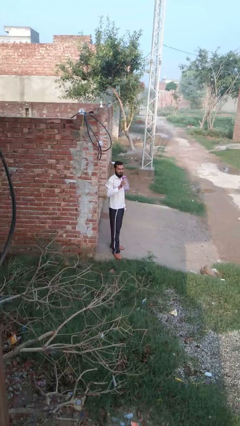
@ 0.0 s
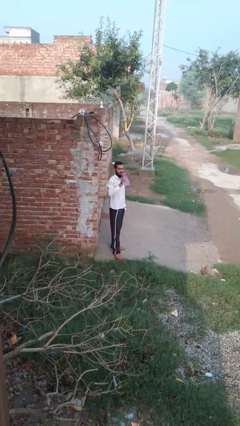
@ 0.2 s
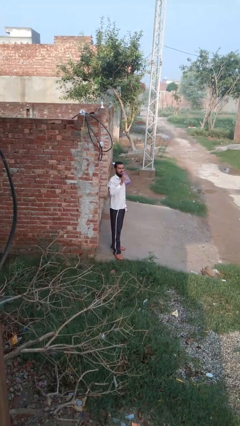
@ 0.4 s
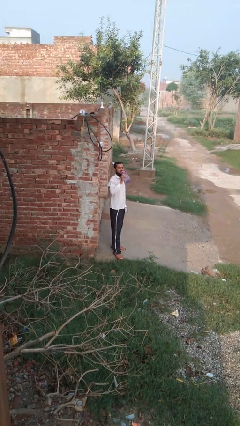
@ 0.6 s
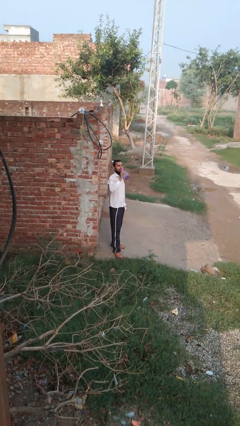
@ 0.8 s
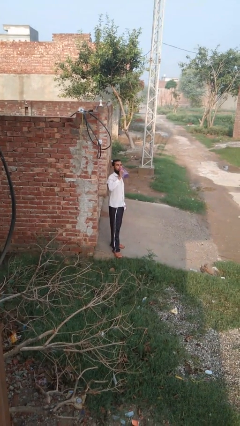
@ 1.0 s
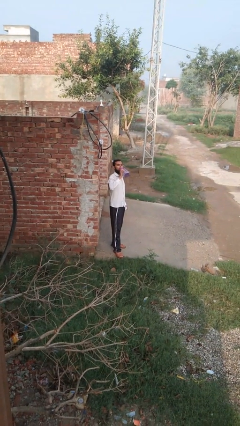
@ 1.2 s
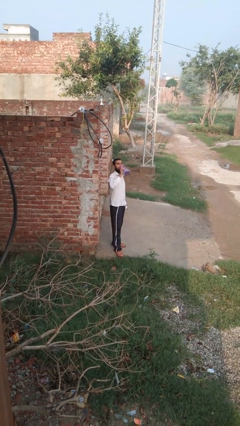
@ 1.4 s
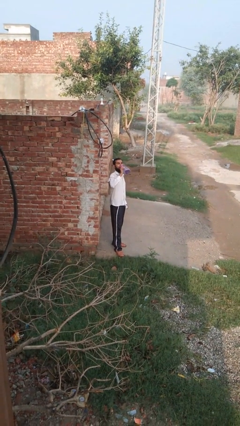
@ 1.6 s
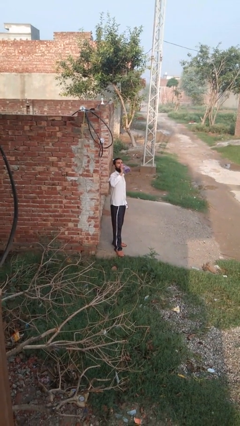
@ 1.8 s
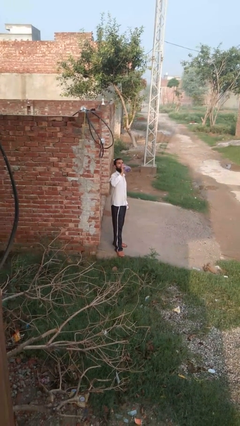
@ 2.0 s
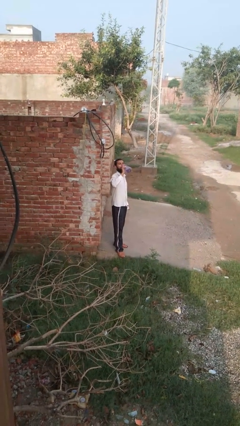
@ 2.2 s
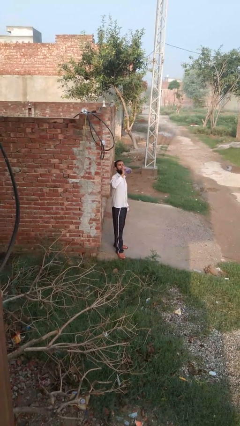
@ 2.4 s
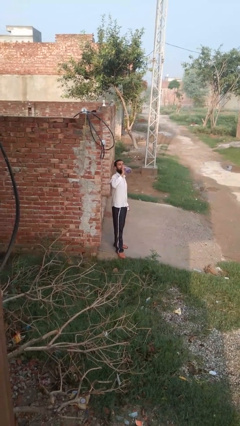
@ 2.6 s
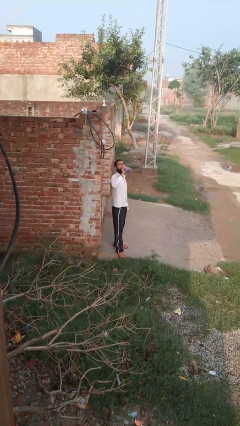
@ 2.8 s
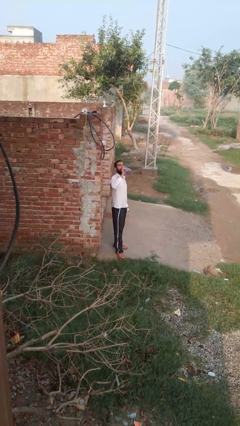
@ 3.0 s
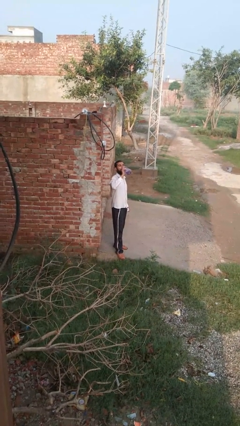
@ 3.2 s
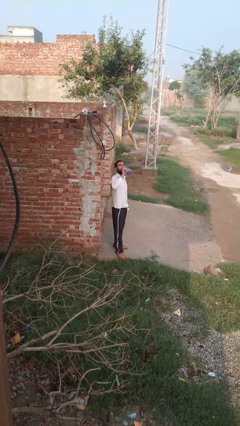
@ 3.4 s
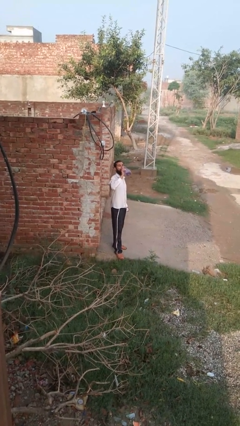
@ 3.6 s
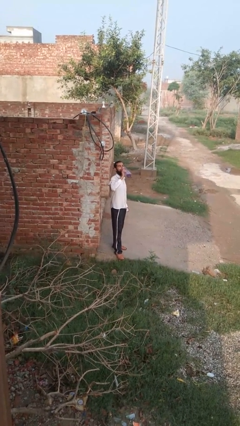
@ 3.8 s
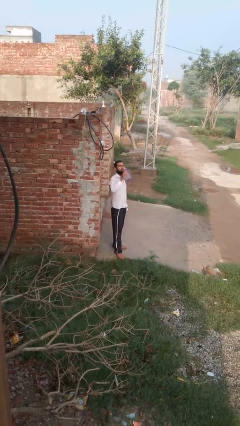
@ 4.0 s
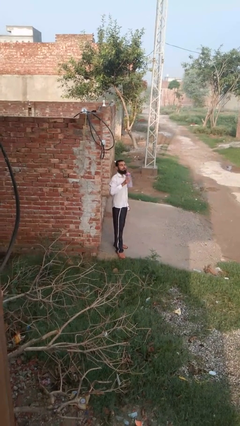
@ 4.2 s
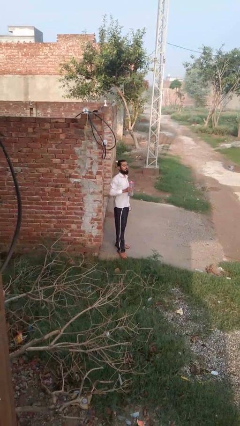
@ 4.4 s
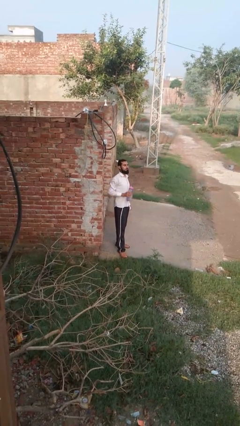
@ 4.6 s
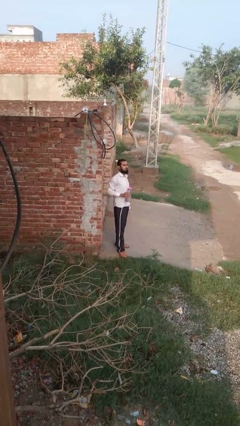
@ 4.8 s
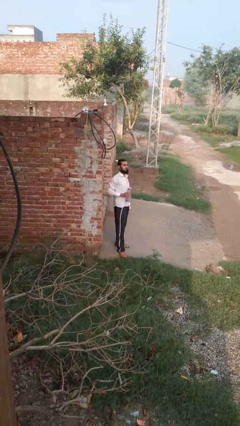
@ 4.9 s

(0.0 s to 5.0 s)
person drinks from bottle

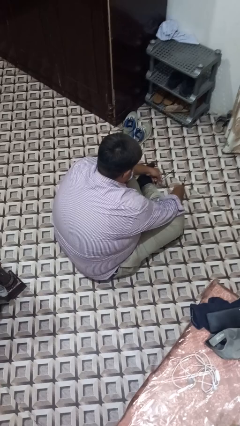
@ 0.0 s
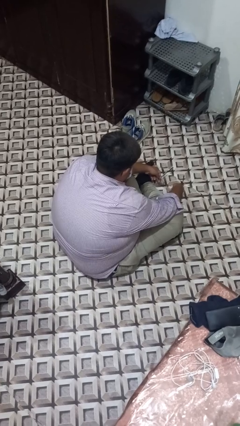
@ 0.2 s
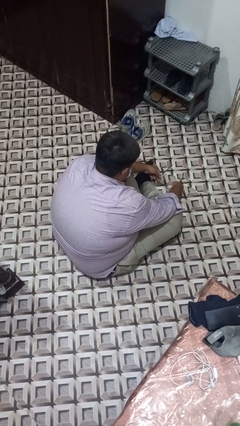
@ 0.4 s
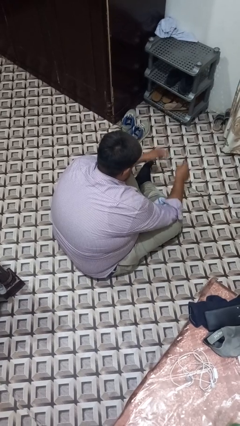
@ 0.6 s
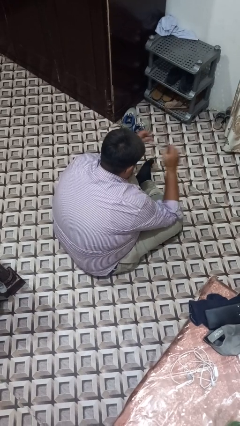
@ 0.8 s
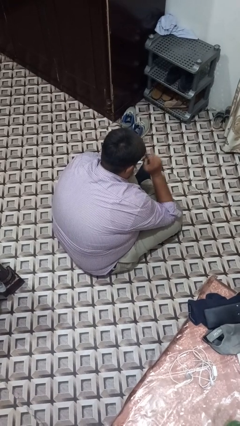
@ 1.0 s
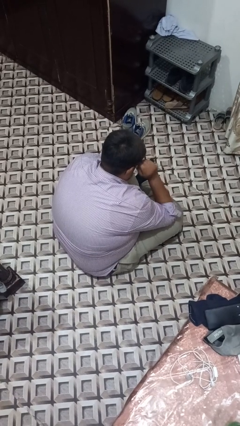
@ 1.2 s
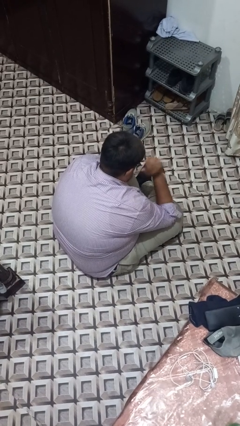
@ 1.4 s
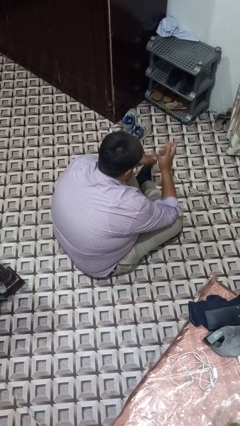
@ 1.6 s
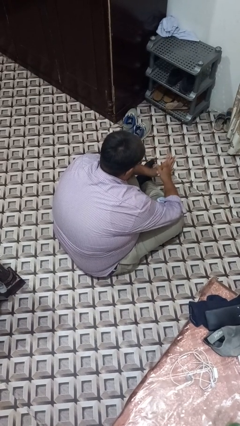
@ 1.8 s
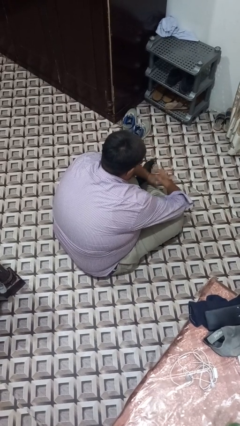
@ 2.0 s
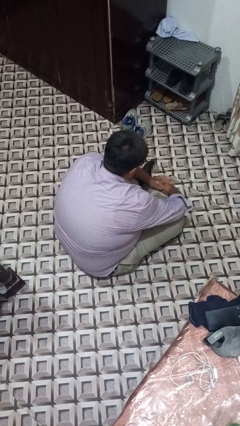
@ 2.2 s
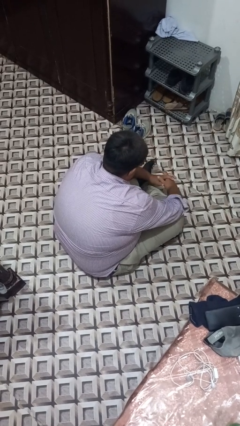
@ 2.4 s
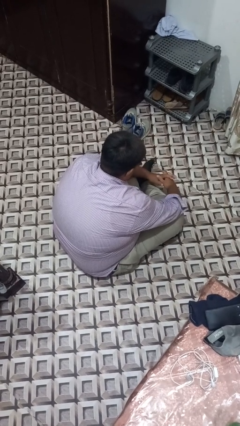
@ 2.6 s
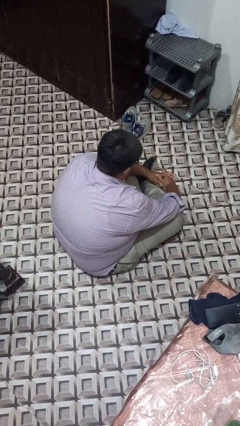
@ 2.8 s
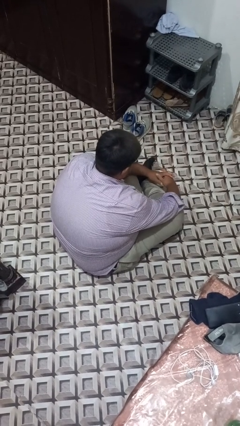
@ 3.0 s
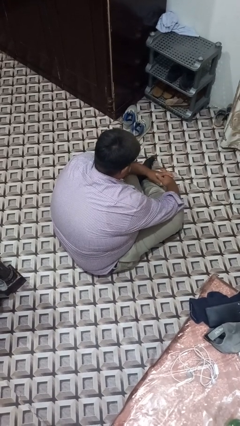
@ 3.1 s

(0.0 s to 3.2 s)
person puts on glasses

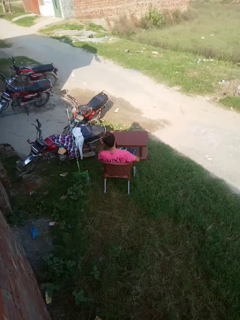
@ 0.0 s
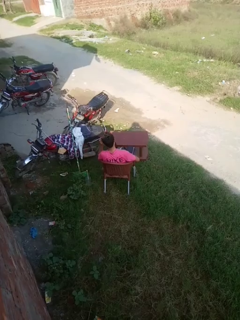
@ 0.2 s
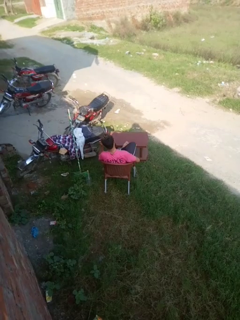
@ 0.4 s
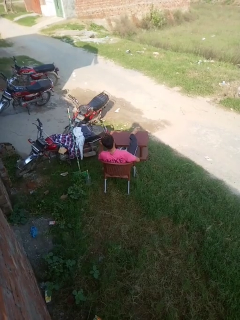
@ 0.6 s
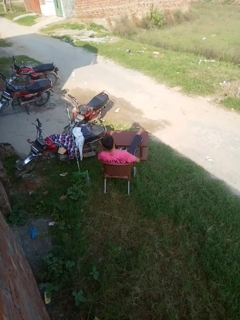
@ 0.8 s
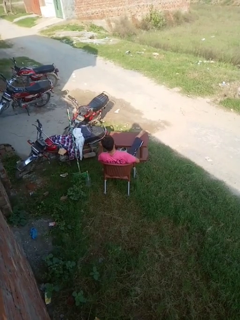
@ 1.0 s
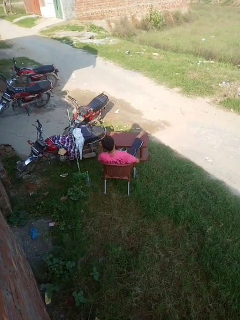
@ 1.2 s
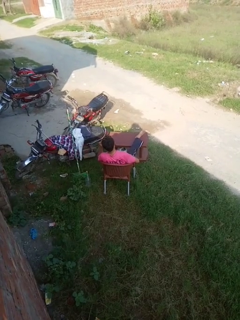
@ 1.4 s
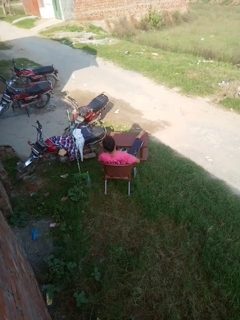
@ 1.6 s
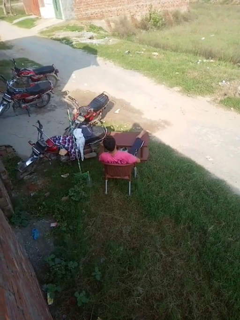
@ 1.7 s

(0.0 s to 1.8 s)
person puts feet up

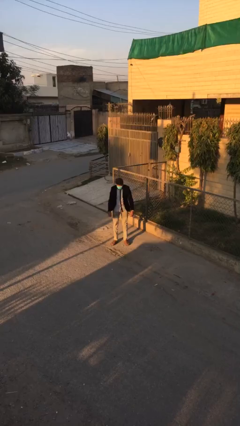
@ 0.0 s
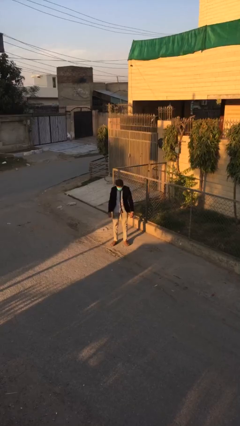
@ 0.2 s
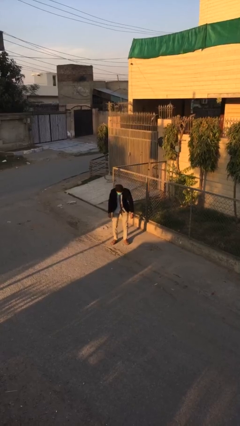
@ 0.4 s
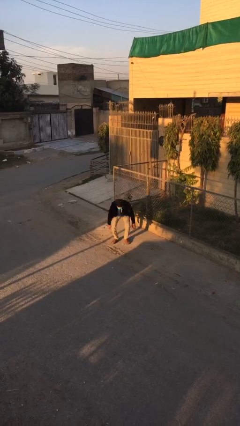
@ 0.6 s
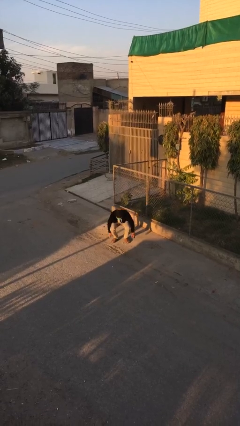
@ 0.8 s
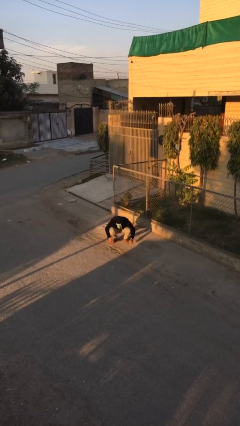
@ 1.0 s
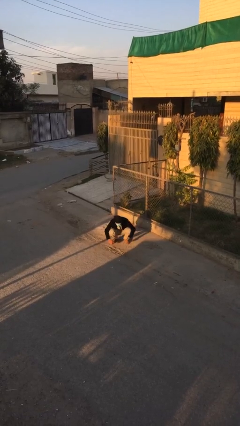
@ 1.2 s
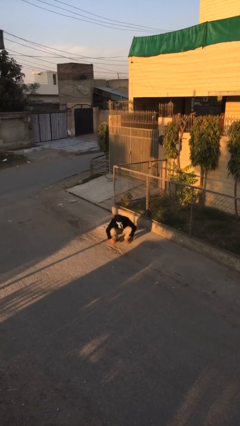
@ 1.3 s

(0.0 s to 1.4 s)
person sits down

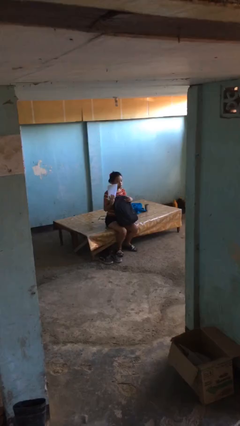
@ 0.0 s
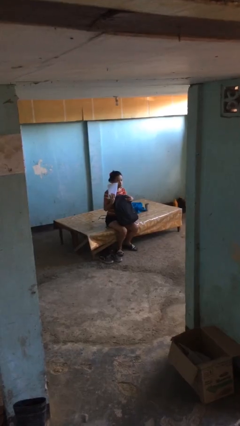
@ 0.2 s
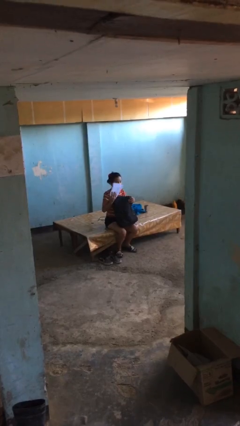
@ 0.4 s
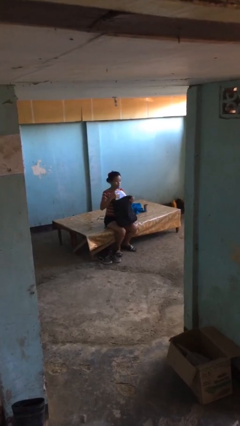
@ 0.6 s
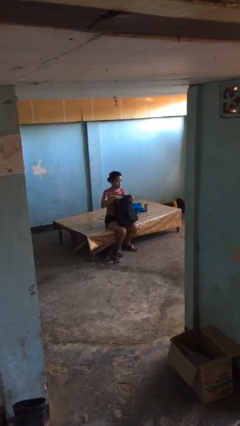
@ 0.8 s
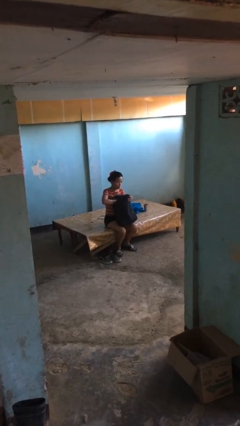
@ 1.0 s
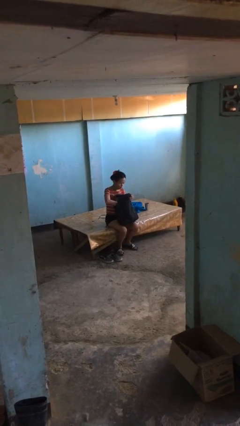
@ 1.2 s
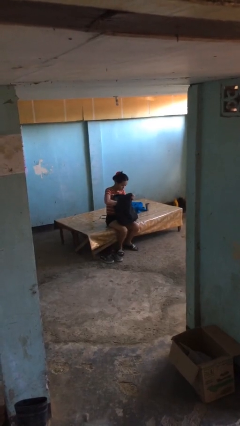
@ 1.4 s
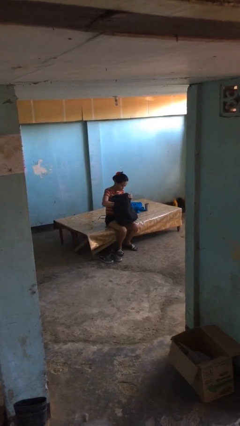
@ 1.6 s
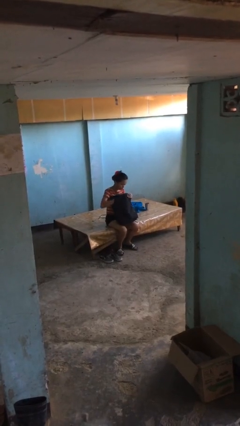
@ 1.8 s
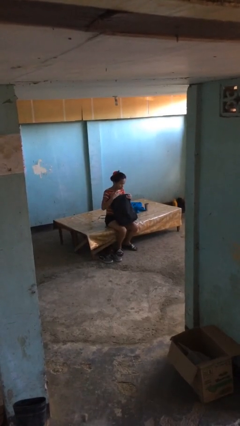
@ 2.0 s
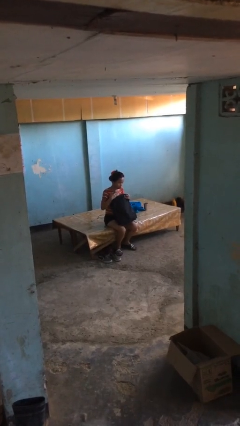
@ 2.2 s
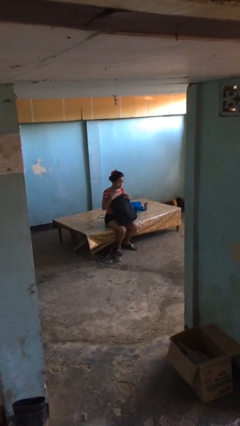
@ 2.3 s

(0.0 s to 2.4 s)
person puts object into backpack

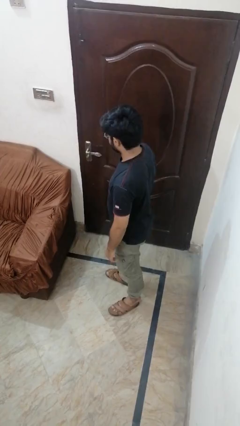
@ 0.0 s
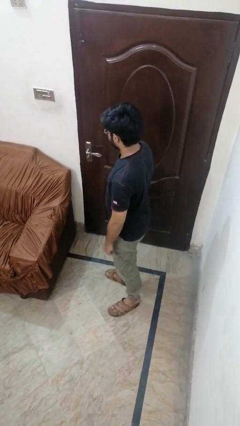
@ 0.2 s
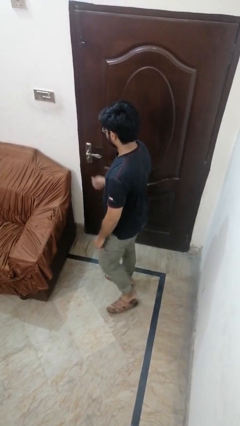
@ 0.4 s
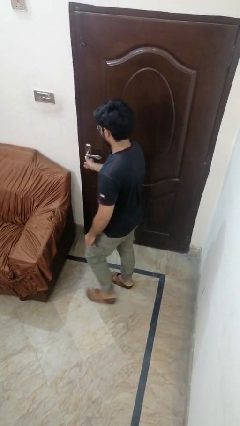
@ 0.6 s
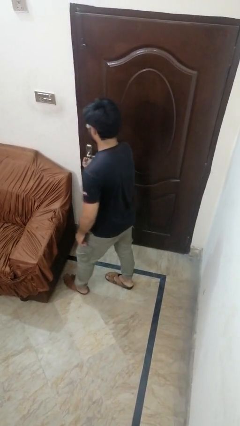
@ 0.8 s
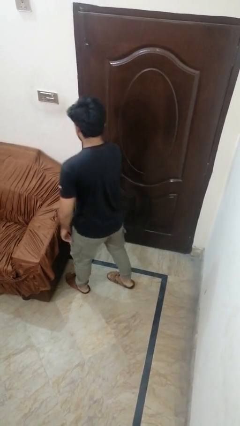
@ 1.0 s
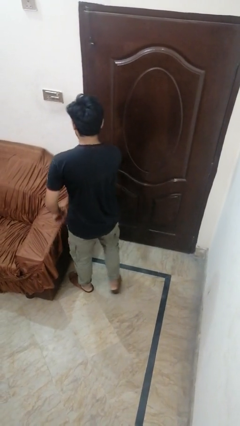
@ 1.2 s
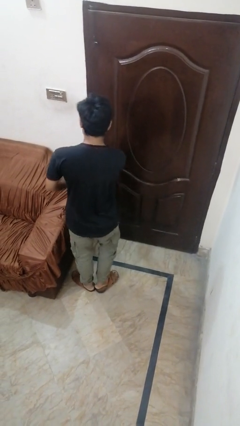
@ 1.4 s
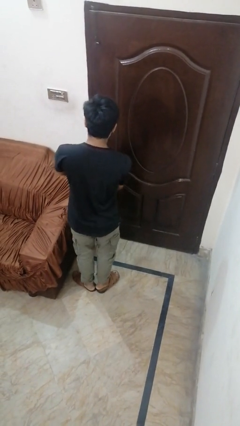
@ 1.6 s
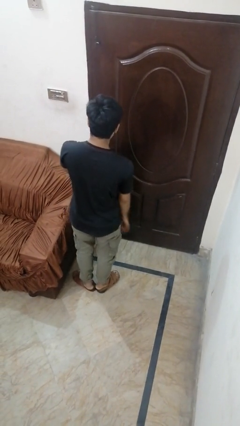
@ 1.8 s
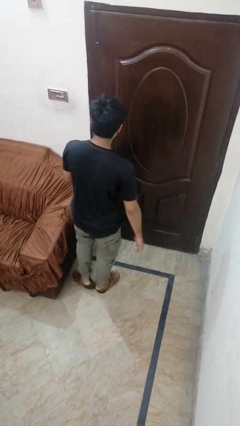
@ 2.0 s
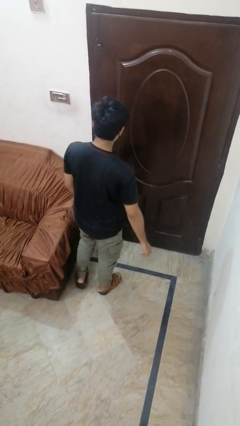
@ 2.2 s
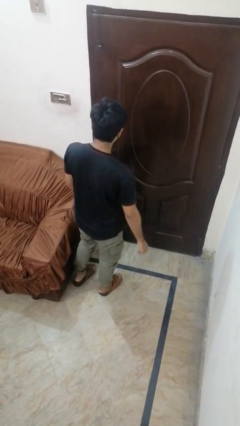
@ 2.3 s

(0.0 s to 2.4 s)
person unlocks door with keys

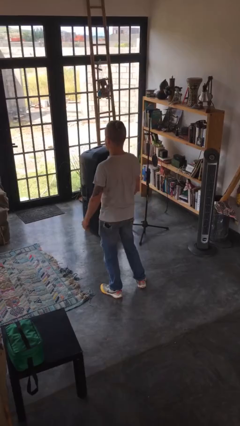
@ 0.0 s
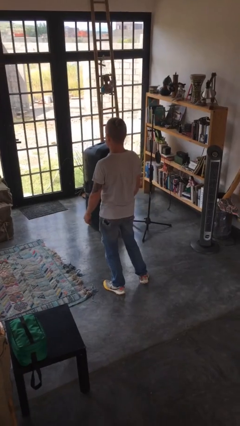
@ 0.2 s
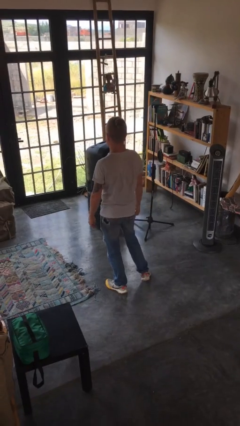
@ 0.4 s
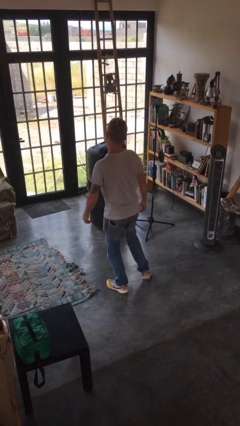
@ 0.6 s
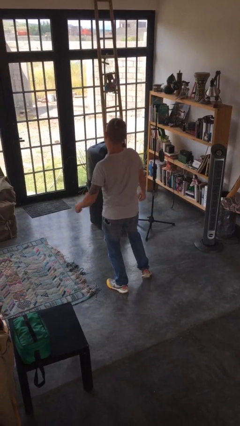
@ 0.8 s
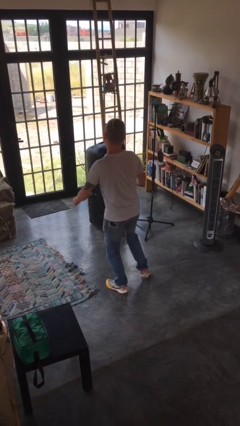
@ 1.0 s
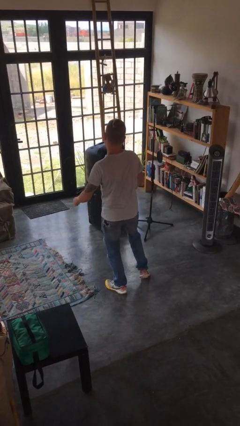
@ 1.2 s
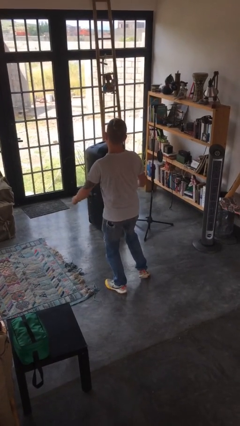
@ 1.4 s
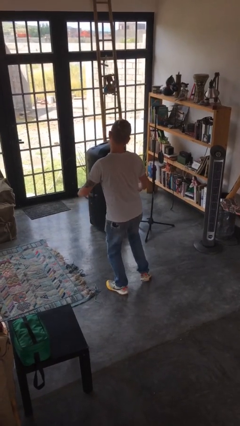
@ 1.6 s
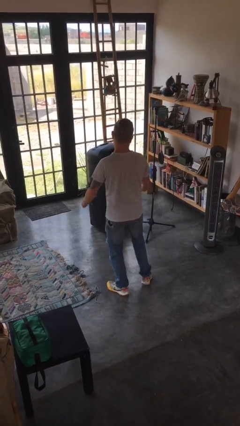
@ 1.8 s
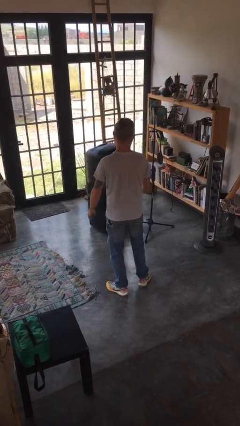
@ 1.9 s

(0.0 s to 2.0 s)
person wiggles hips
